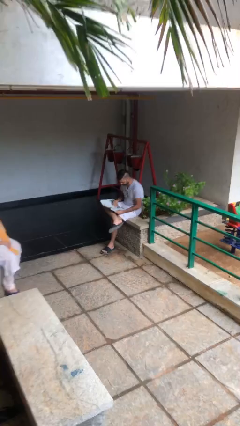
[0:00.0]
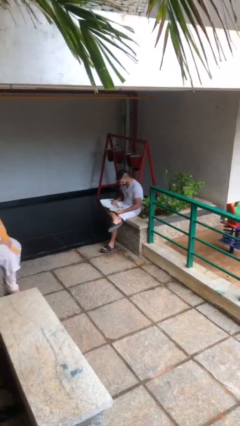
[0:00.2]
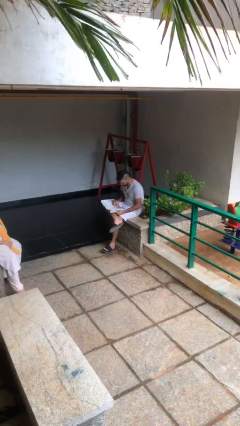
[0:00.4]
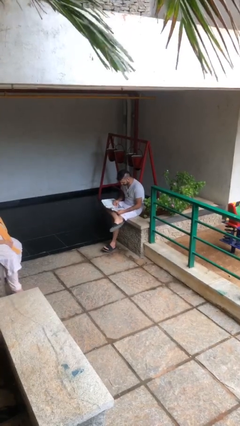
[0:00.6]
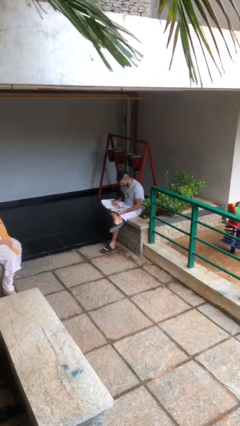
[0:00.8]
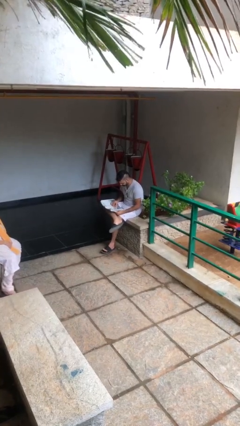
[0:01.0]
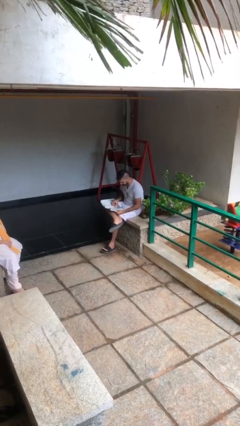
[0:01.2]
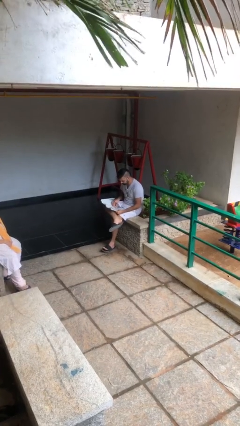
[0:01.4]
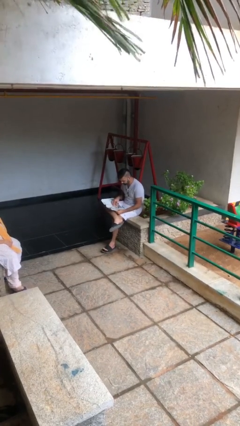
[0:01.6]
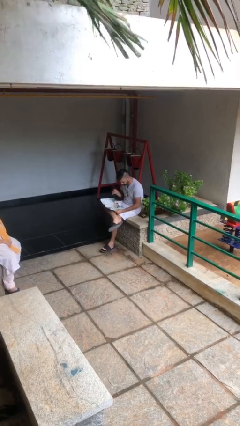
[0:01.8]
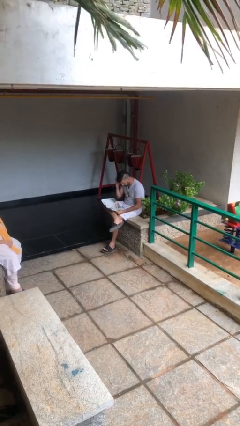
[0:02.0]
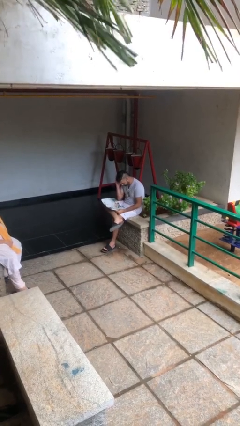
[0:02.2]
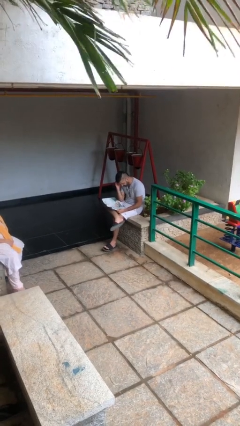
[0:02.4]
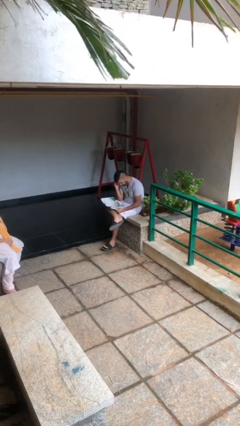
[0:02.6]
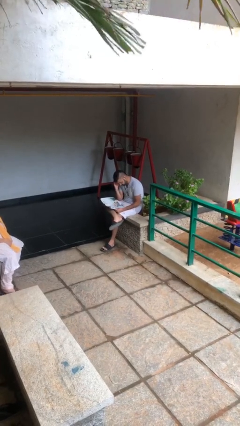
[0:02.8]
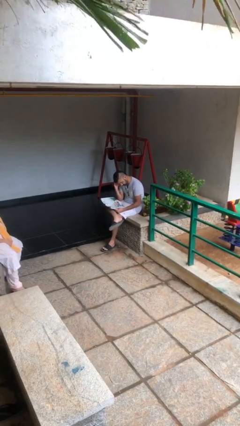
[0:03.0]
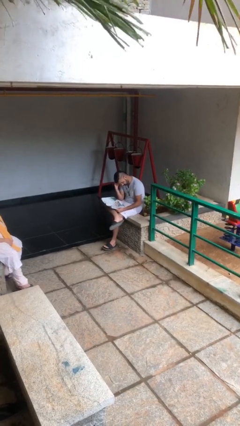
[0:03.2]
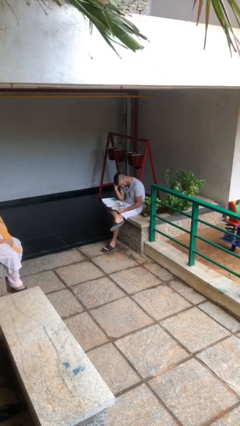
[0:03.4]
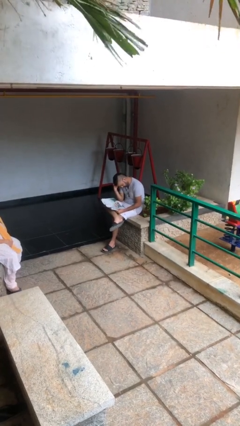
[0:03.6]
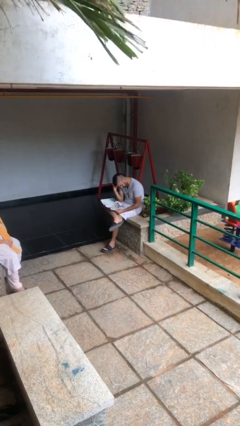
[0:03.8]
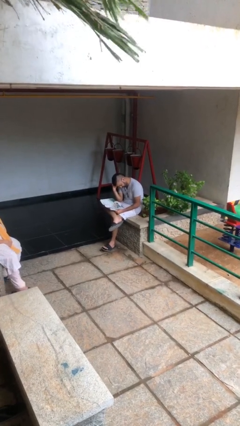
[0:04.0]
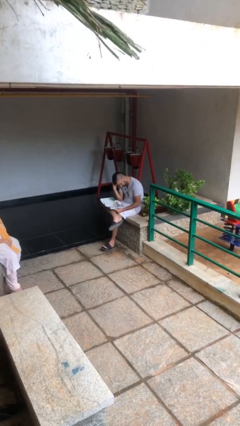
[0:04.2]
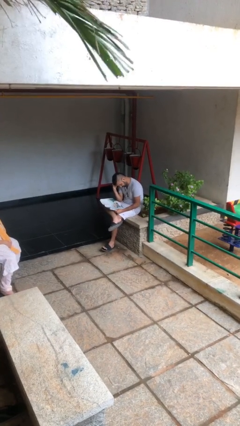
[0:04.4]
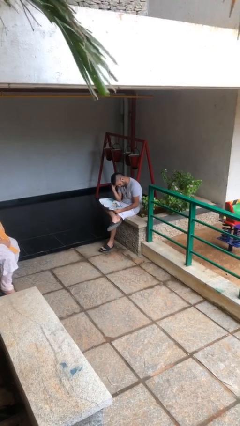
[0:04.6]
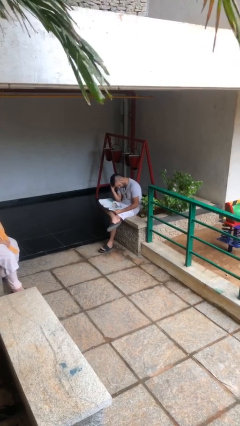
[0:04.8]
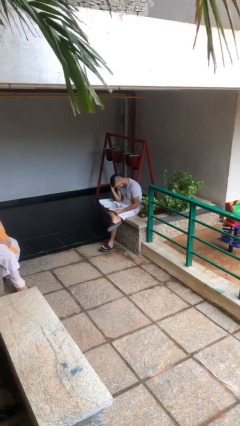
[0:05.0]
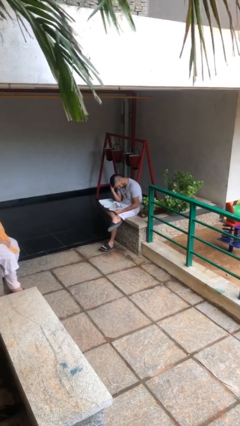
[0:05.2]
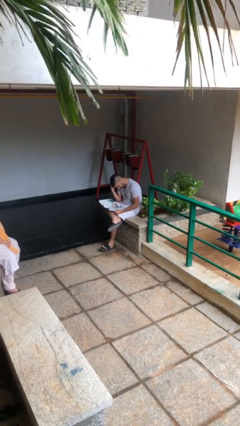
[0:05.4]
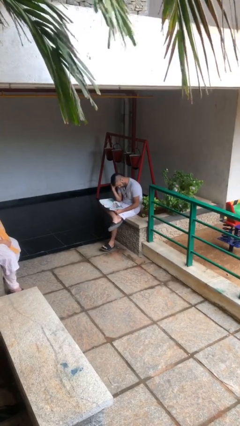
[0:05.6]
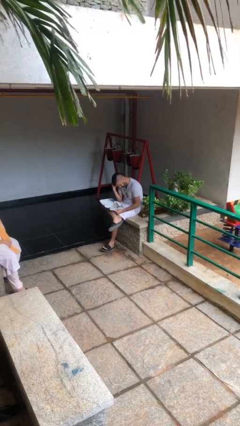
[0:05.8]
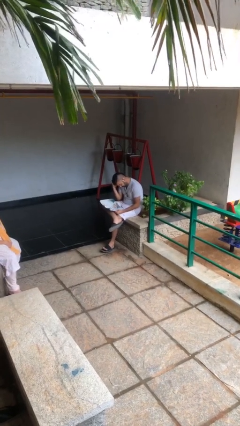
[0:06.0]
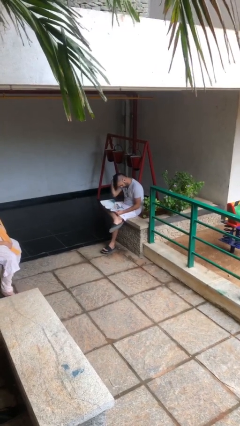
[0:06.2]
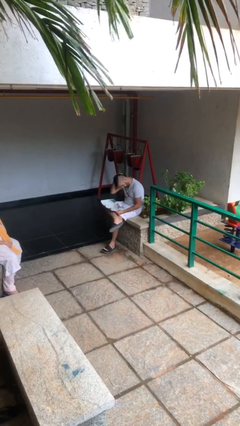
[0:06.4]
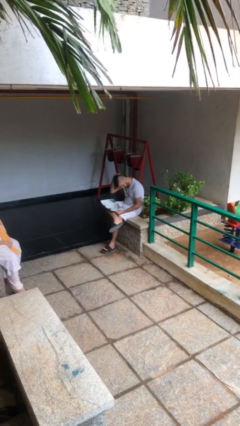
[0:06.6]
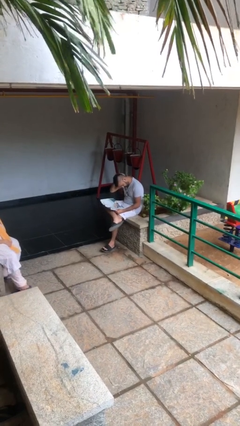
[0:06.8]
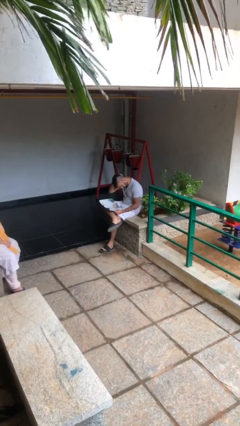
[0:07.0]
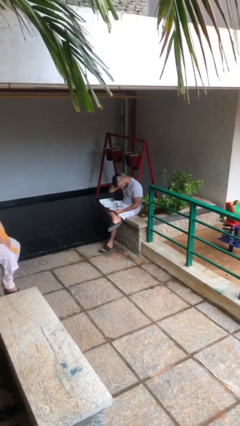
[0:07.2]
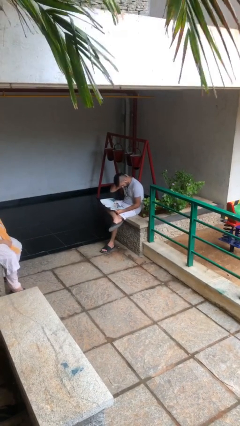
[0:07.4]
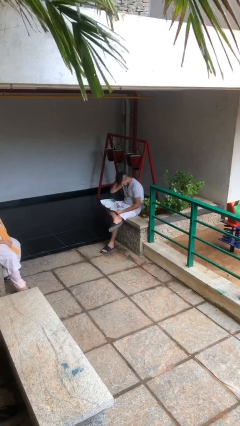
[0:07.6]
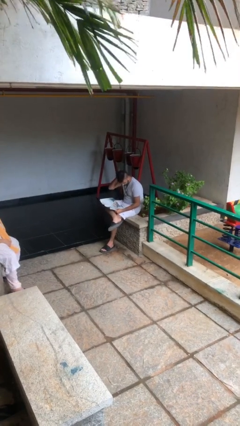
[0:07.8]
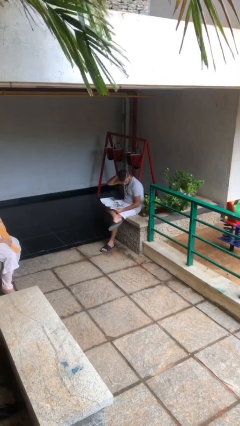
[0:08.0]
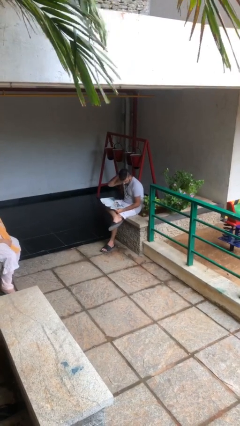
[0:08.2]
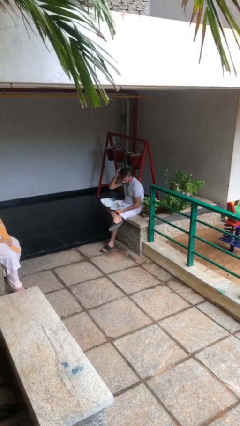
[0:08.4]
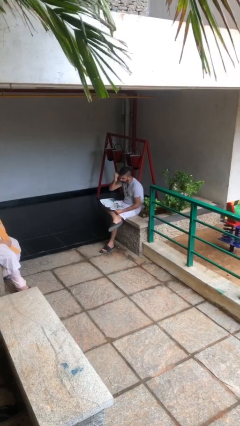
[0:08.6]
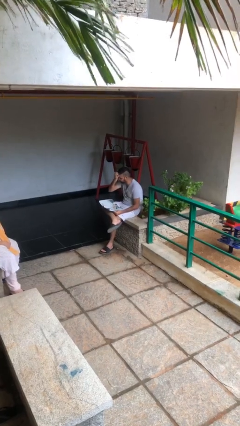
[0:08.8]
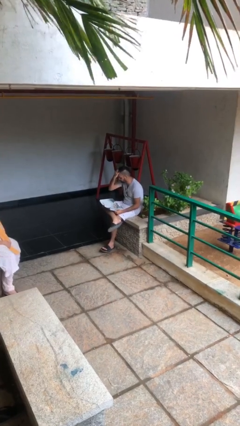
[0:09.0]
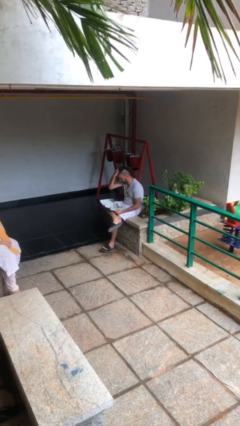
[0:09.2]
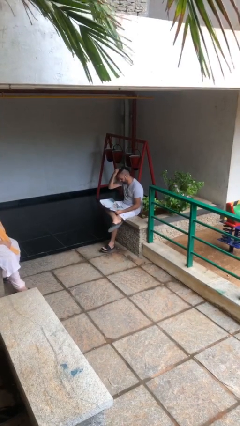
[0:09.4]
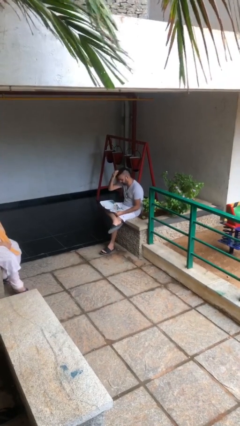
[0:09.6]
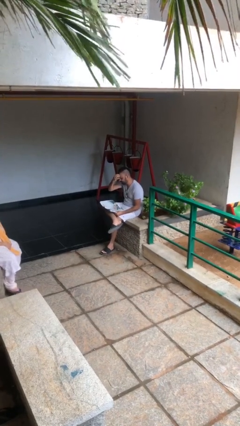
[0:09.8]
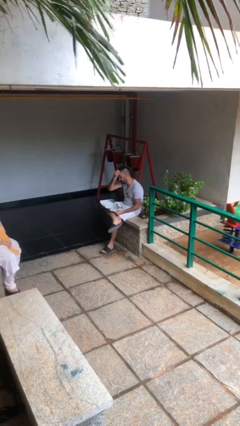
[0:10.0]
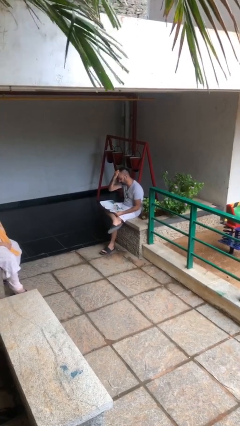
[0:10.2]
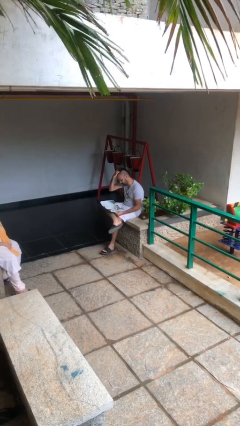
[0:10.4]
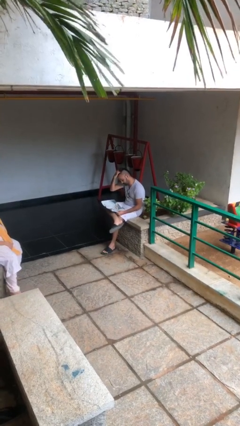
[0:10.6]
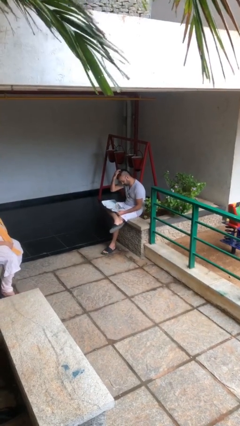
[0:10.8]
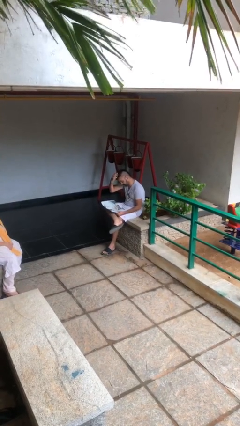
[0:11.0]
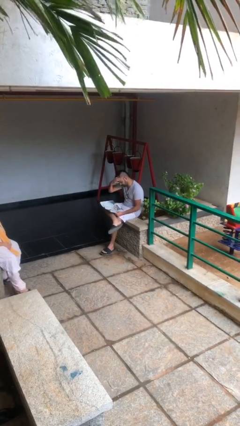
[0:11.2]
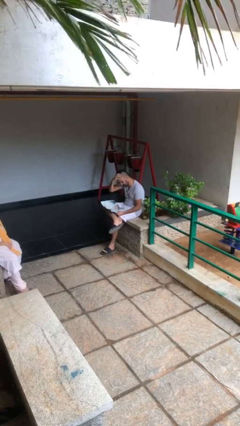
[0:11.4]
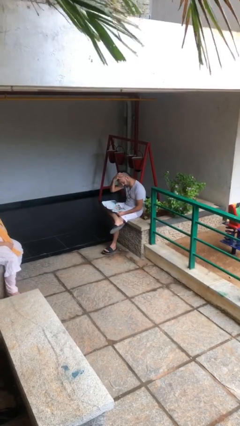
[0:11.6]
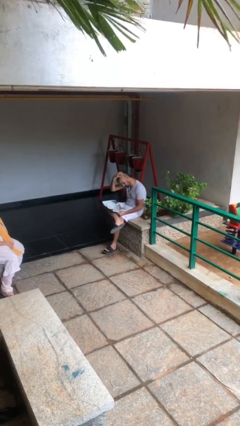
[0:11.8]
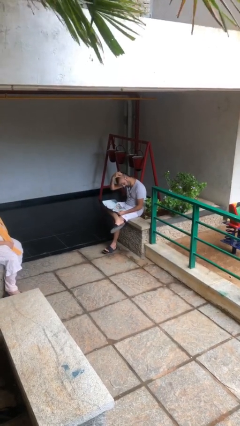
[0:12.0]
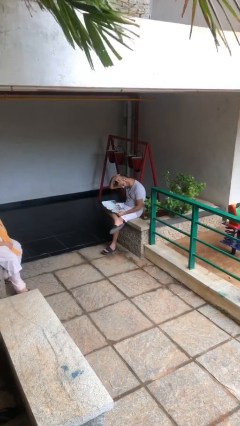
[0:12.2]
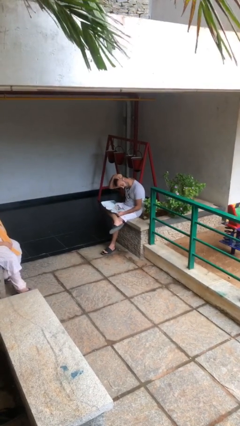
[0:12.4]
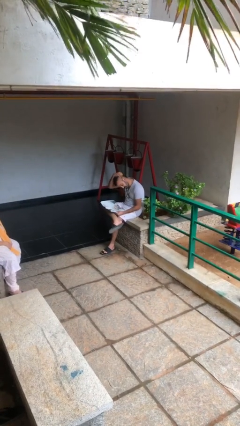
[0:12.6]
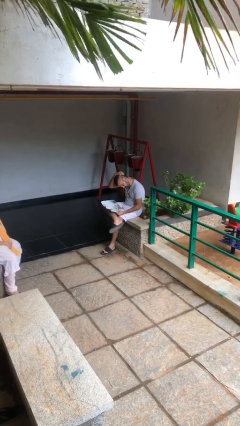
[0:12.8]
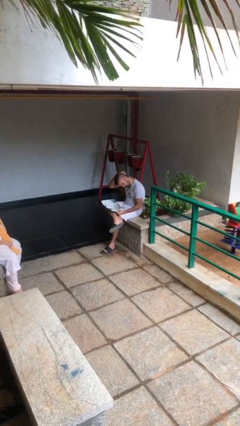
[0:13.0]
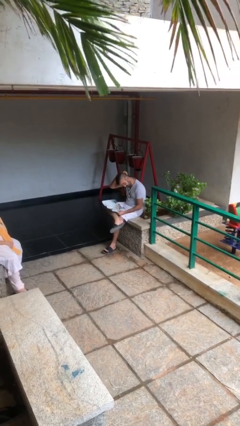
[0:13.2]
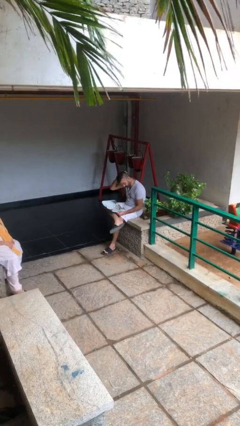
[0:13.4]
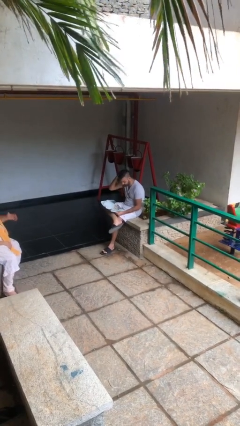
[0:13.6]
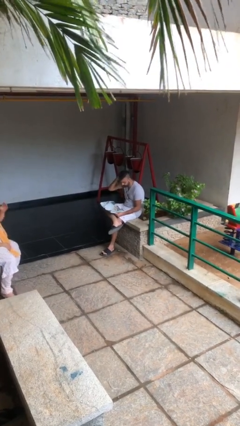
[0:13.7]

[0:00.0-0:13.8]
person reads document

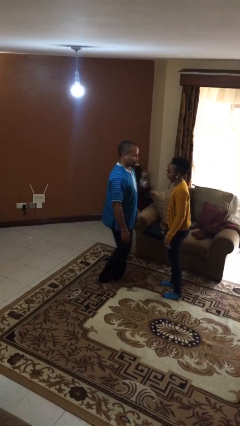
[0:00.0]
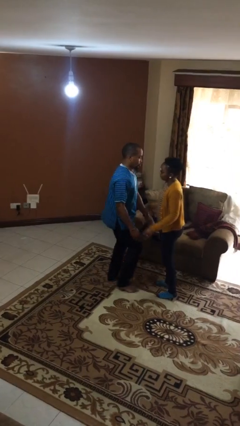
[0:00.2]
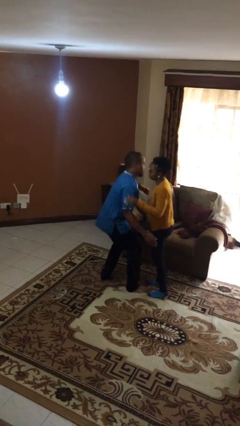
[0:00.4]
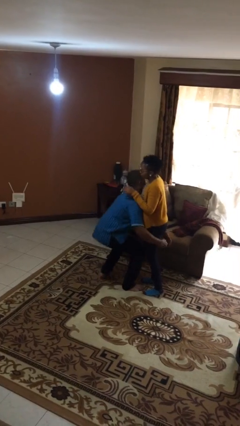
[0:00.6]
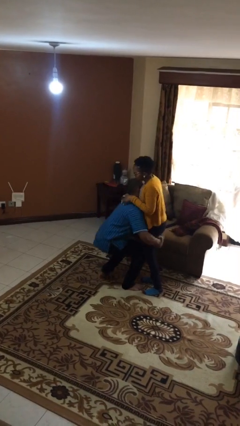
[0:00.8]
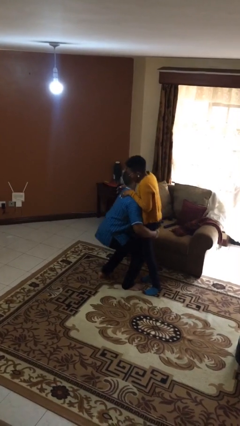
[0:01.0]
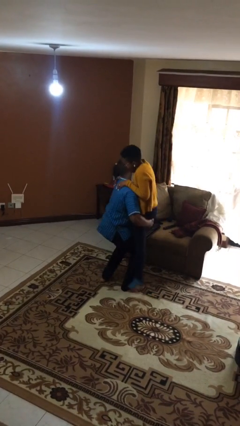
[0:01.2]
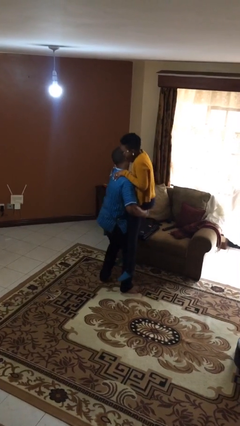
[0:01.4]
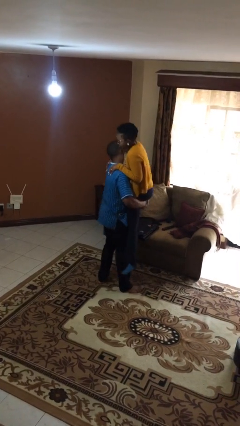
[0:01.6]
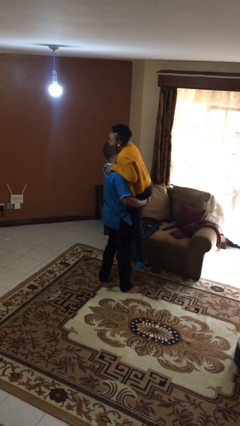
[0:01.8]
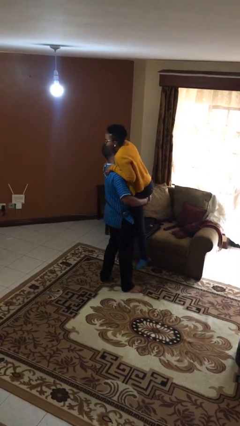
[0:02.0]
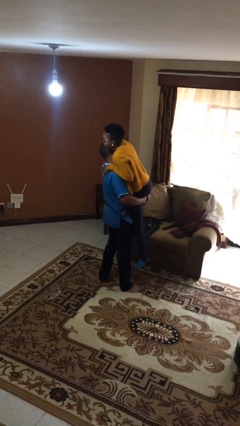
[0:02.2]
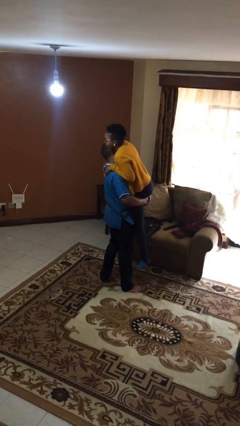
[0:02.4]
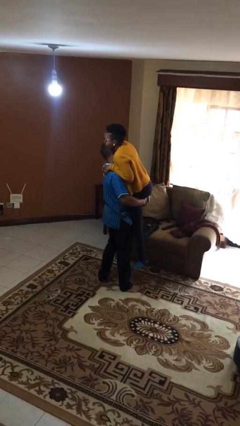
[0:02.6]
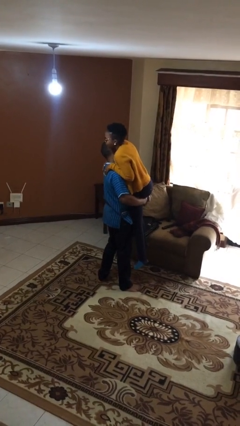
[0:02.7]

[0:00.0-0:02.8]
person picks up person

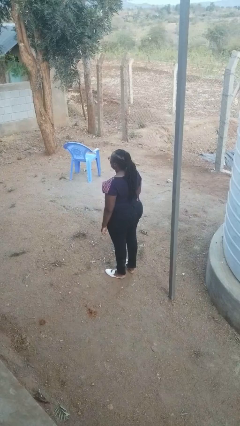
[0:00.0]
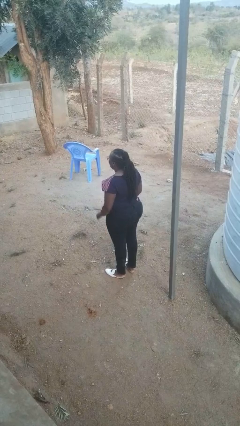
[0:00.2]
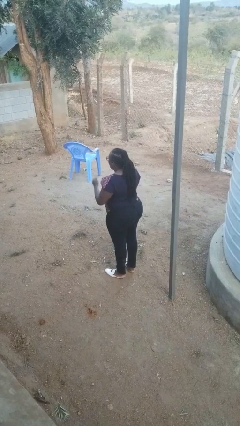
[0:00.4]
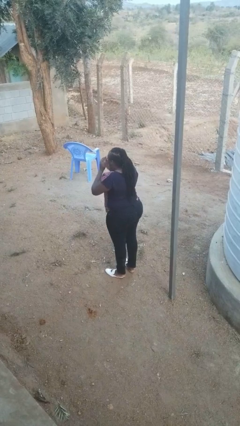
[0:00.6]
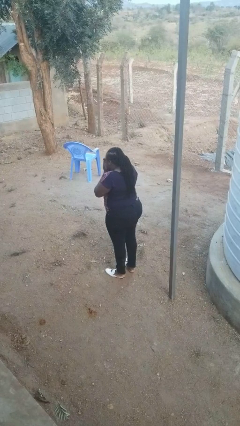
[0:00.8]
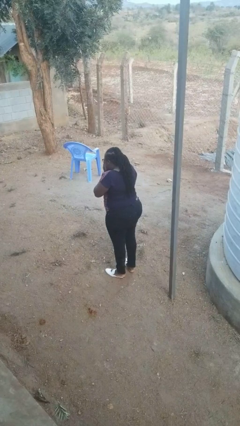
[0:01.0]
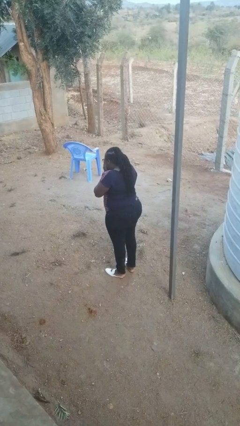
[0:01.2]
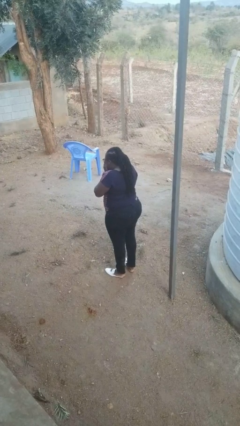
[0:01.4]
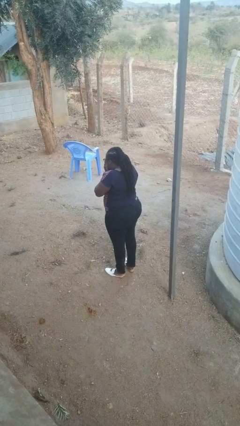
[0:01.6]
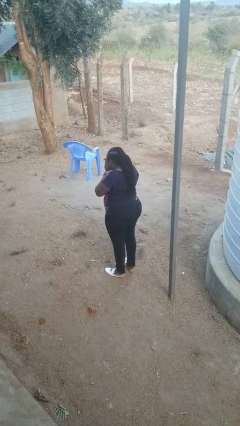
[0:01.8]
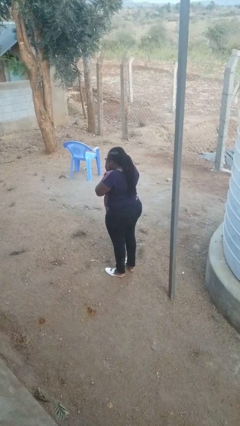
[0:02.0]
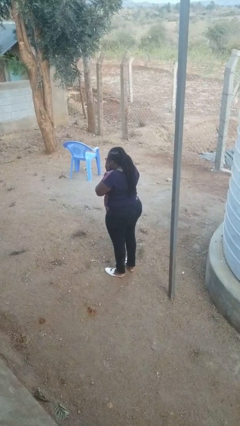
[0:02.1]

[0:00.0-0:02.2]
person sneezes into hand
